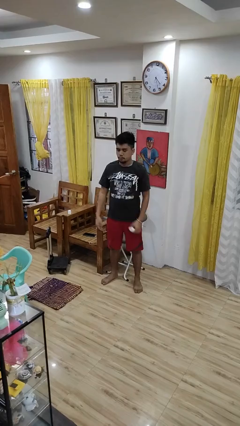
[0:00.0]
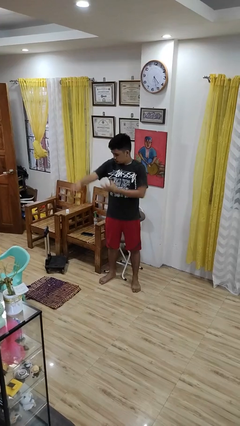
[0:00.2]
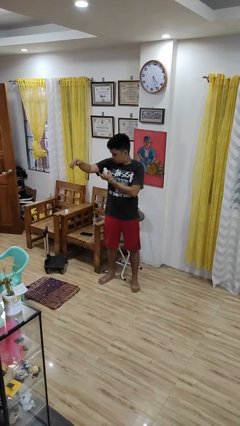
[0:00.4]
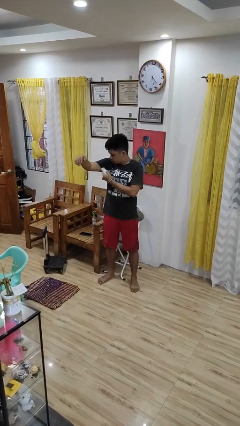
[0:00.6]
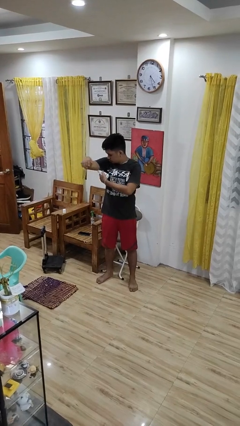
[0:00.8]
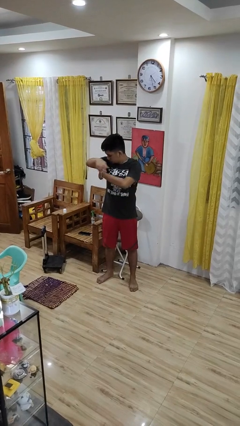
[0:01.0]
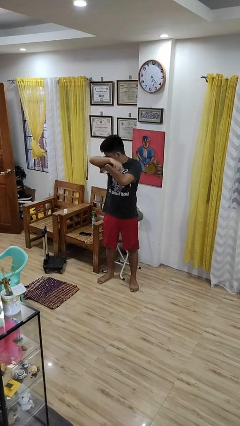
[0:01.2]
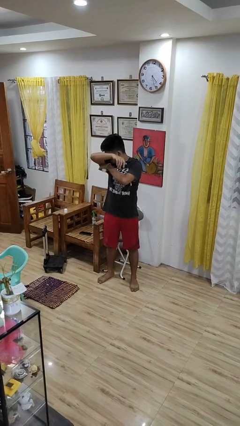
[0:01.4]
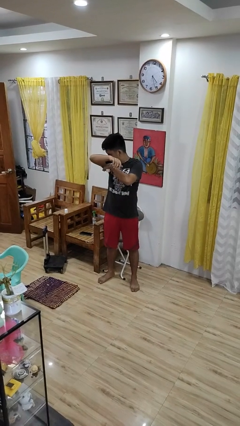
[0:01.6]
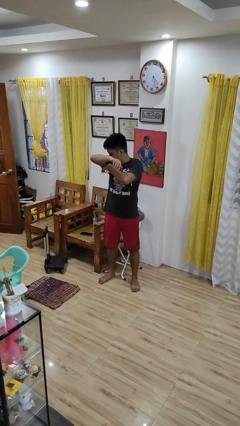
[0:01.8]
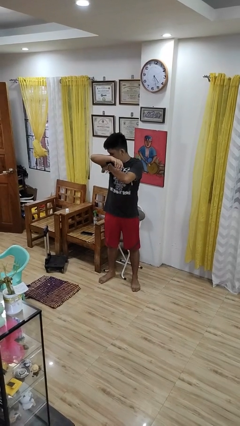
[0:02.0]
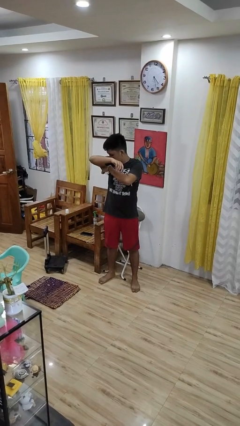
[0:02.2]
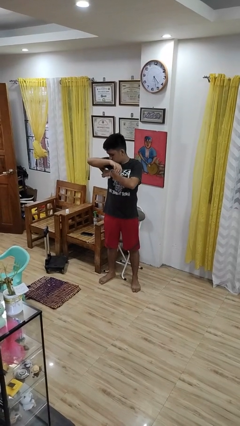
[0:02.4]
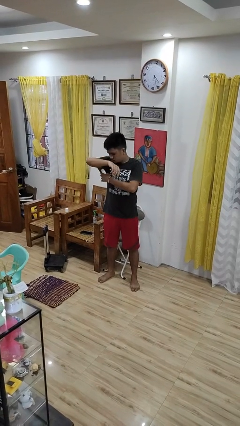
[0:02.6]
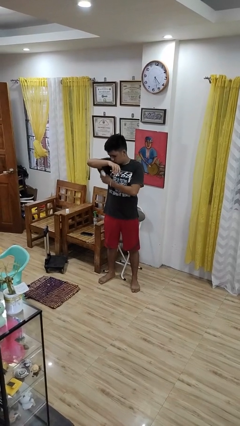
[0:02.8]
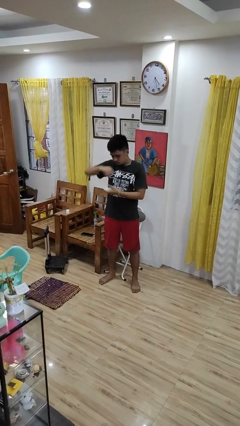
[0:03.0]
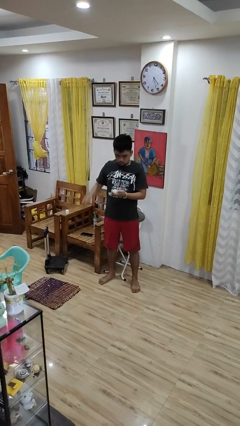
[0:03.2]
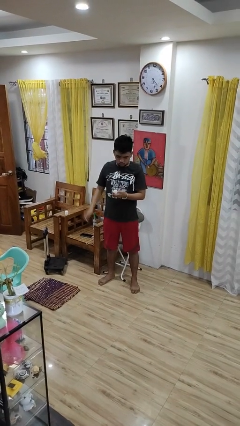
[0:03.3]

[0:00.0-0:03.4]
person applies deodorant

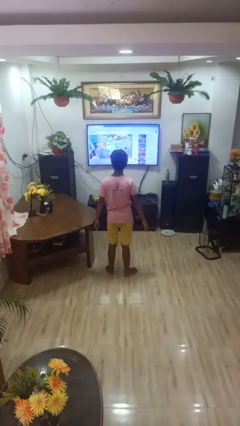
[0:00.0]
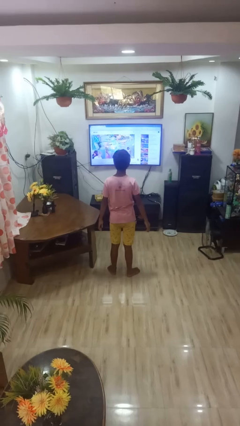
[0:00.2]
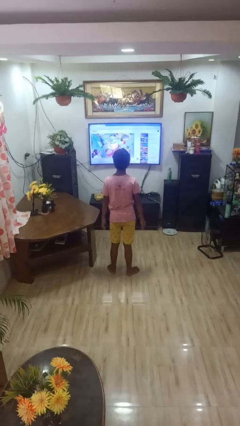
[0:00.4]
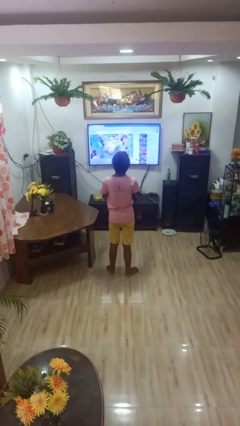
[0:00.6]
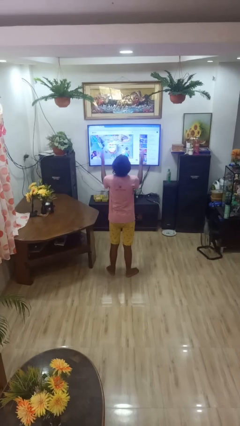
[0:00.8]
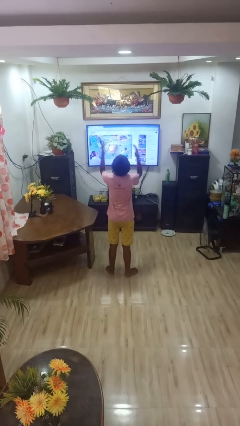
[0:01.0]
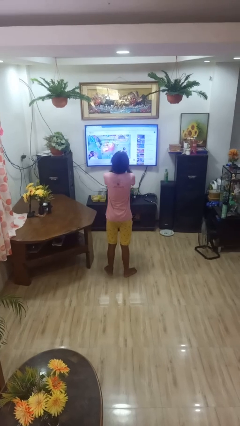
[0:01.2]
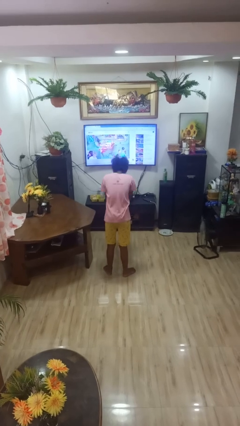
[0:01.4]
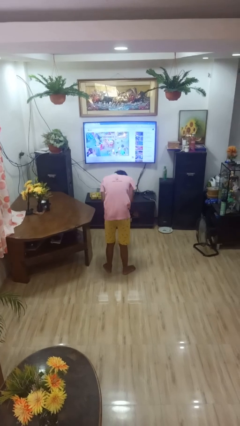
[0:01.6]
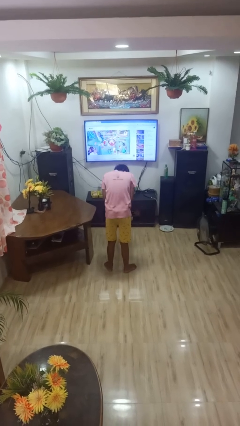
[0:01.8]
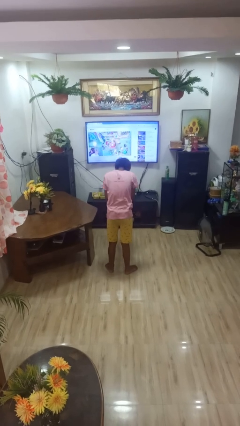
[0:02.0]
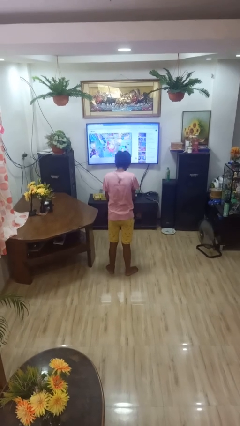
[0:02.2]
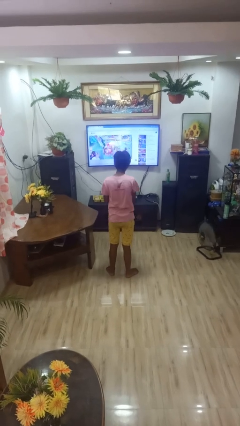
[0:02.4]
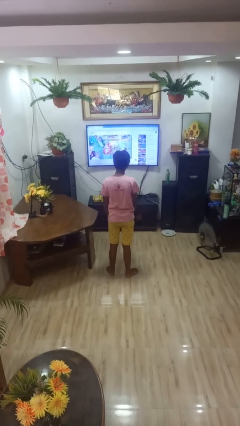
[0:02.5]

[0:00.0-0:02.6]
person sneezes into hand

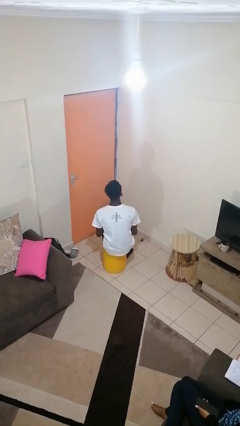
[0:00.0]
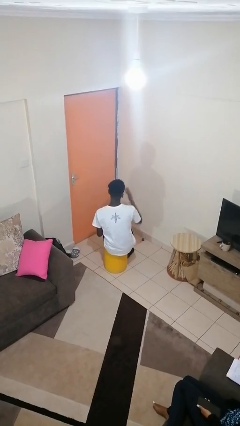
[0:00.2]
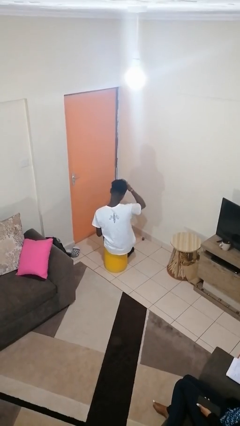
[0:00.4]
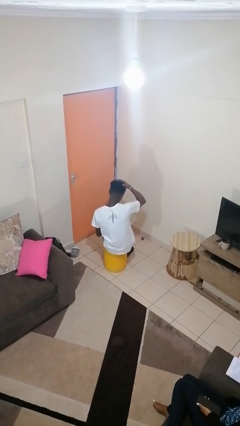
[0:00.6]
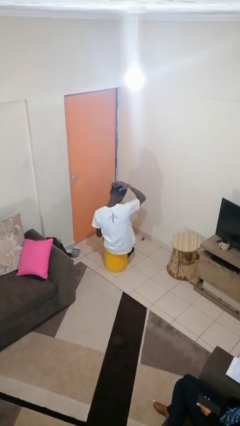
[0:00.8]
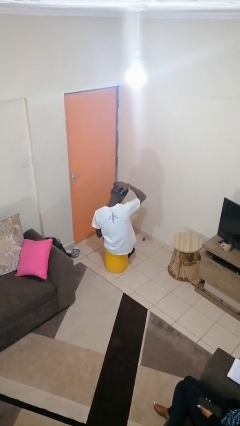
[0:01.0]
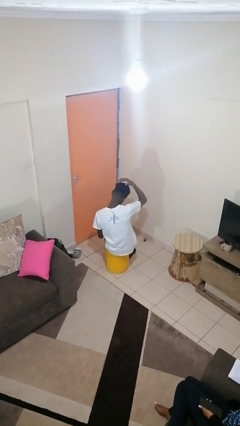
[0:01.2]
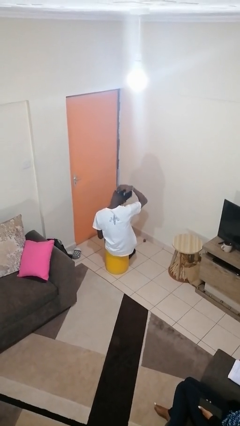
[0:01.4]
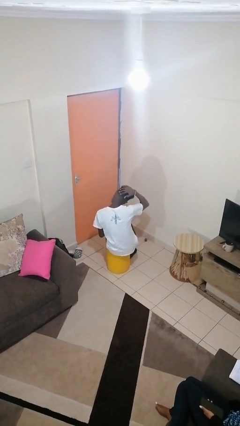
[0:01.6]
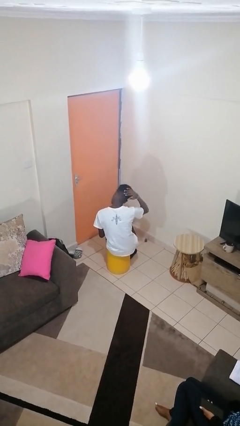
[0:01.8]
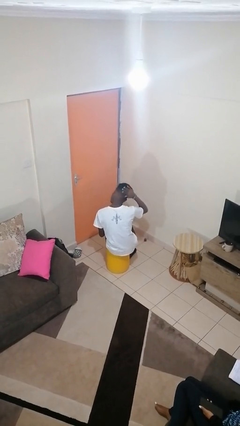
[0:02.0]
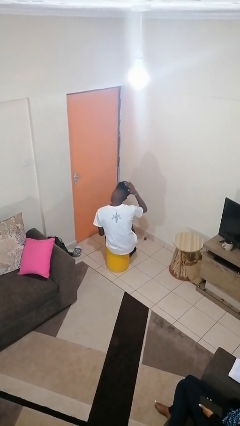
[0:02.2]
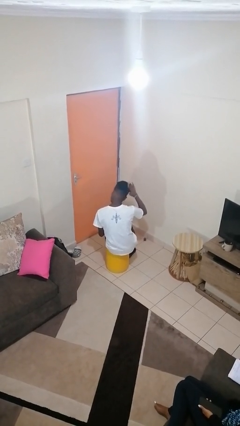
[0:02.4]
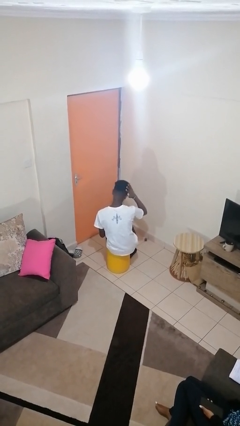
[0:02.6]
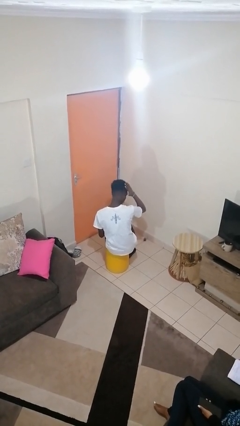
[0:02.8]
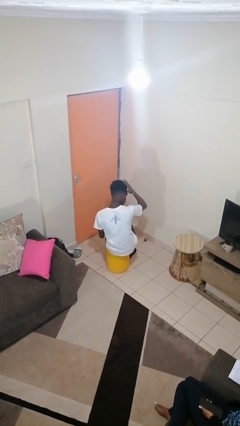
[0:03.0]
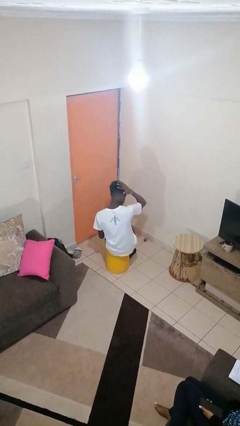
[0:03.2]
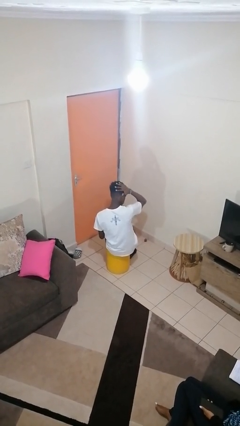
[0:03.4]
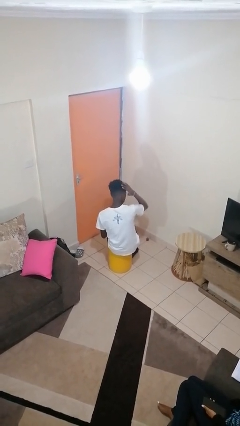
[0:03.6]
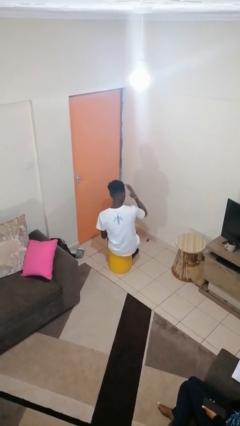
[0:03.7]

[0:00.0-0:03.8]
person strokes hair

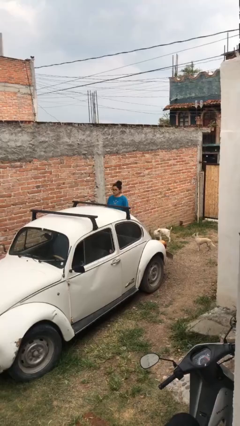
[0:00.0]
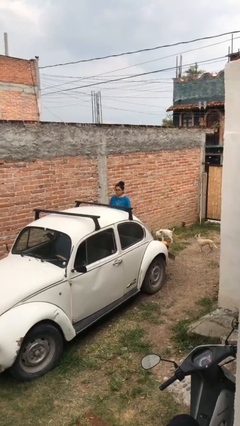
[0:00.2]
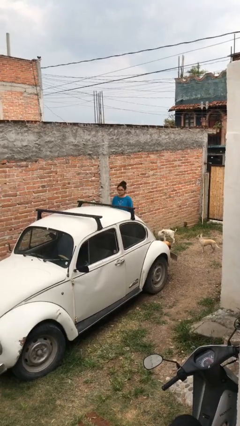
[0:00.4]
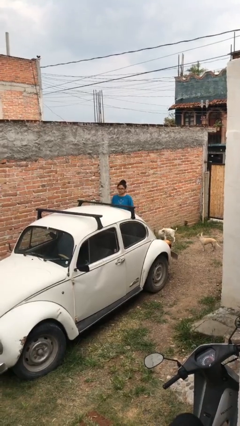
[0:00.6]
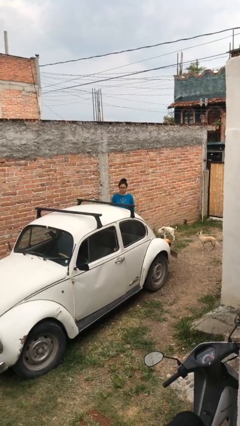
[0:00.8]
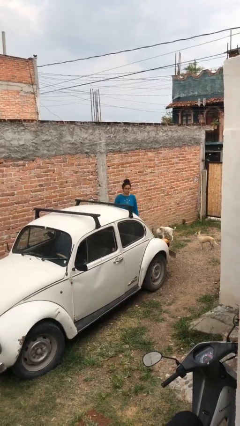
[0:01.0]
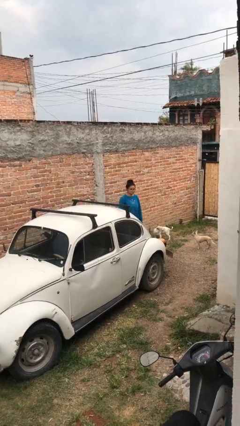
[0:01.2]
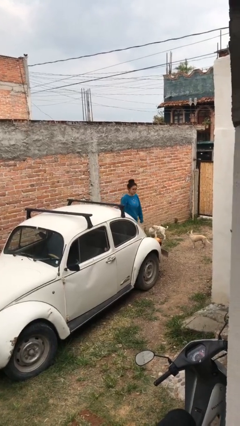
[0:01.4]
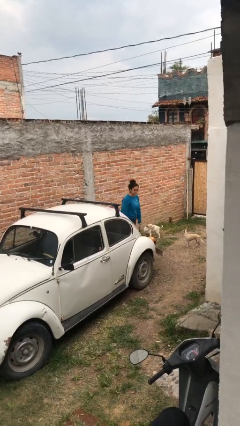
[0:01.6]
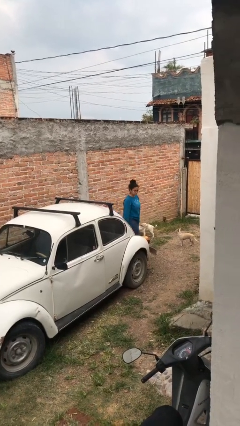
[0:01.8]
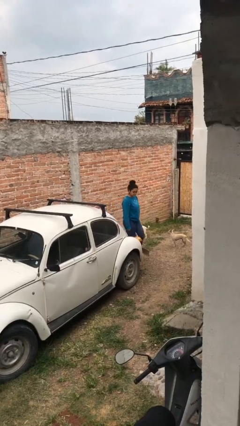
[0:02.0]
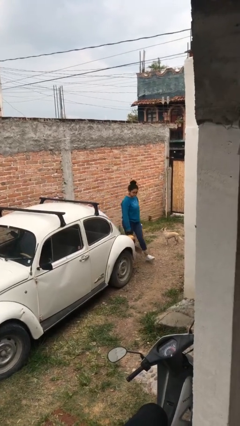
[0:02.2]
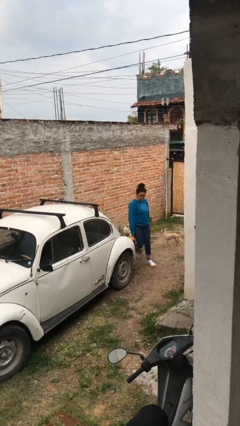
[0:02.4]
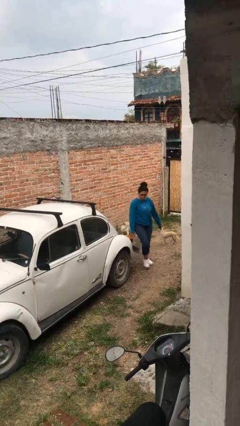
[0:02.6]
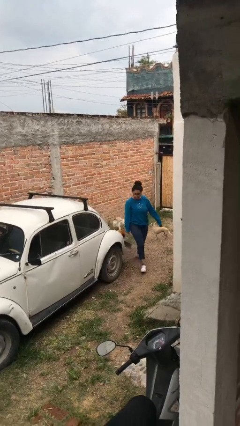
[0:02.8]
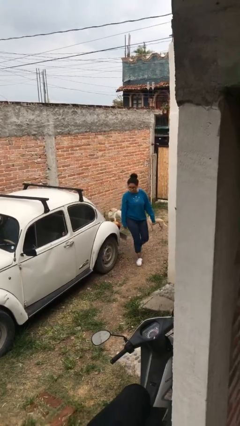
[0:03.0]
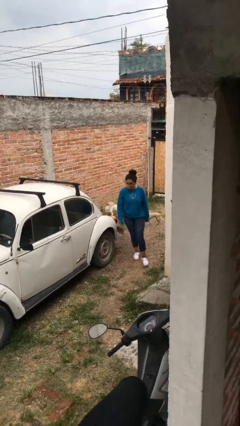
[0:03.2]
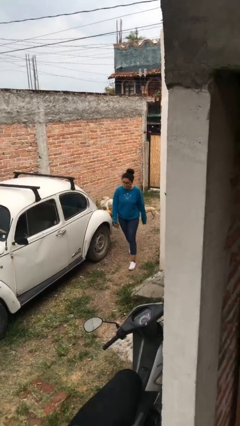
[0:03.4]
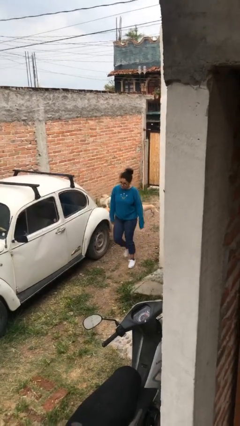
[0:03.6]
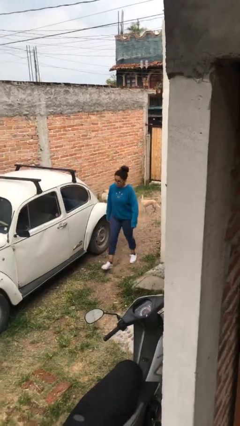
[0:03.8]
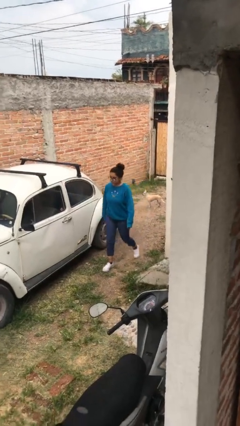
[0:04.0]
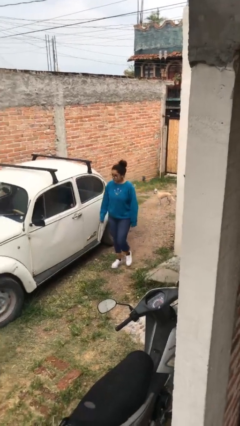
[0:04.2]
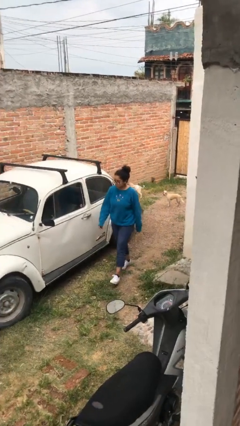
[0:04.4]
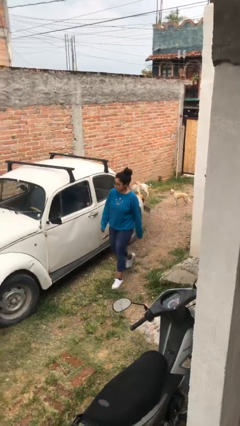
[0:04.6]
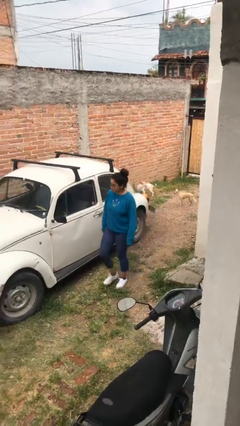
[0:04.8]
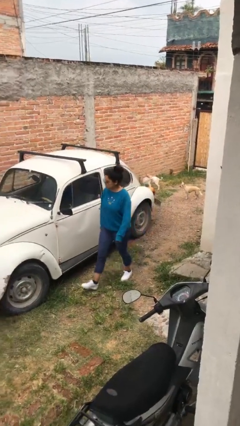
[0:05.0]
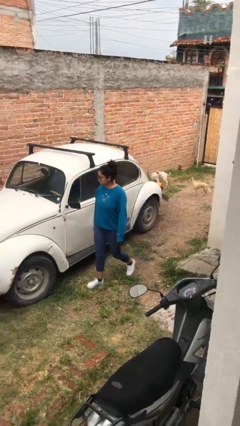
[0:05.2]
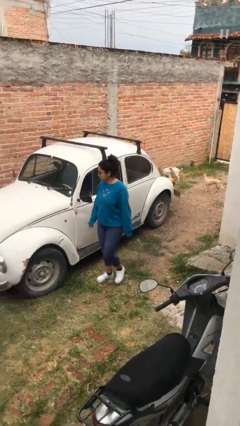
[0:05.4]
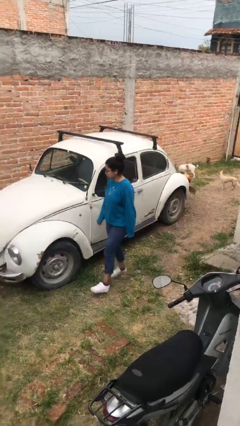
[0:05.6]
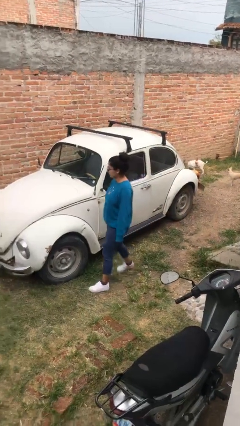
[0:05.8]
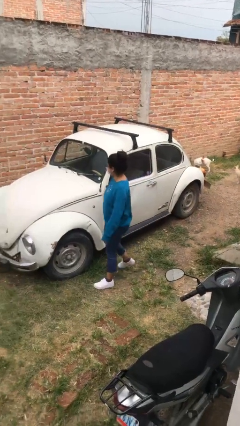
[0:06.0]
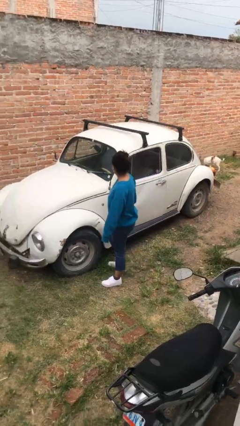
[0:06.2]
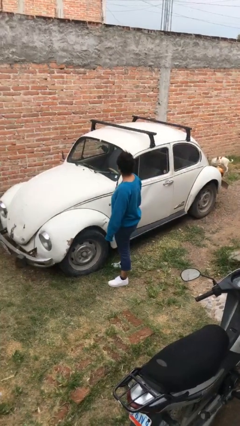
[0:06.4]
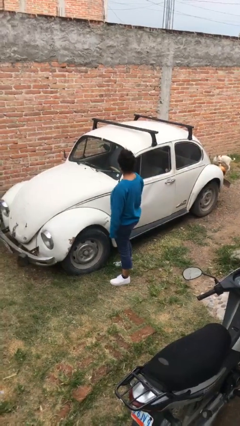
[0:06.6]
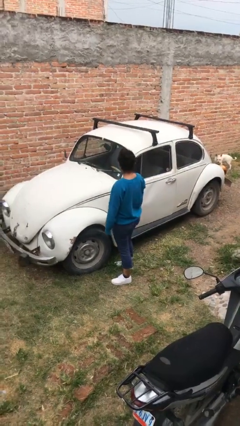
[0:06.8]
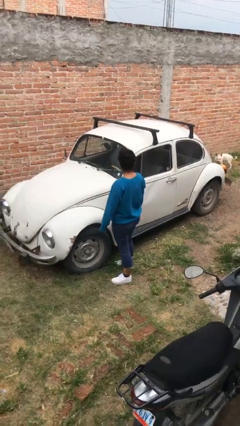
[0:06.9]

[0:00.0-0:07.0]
person walks around car

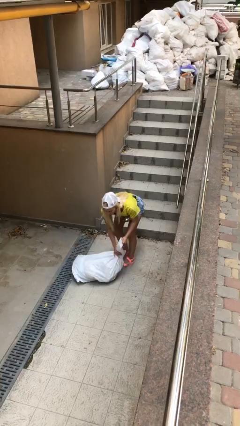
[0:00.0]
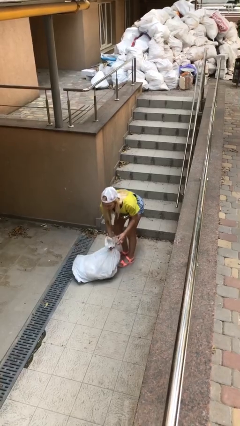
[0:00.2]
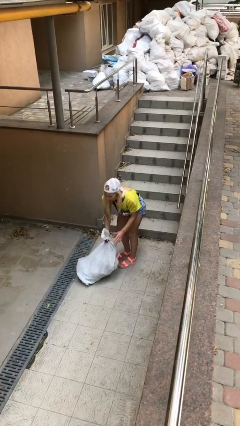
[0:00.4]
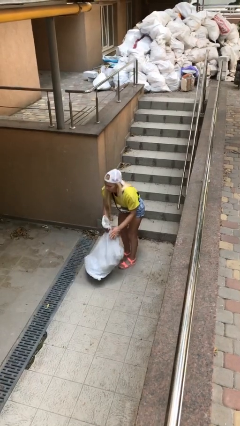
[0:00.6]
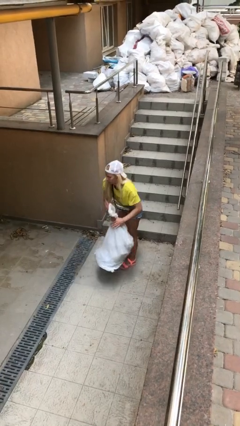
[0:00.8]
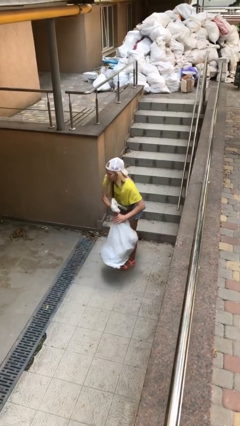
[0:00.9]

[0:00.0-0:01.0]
person picks up object from floor
